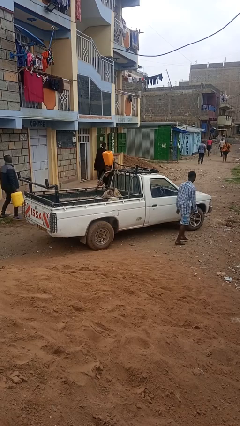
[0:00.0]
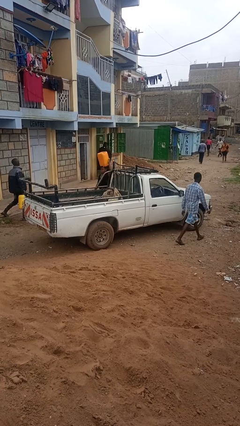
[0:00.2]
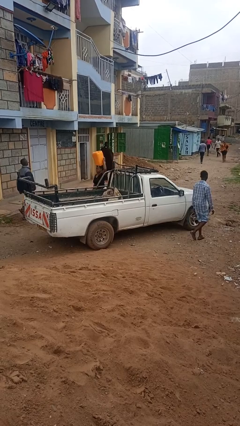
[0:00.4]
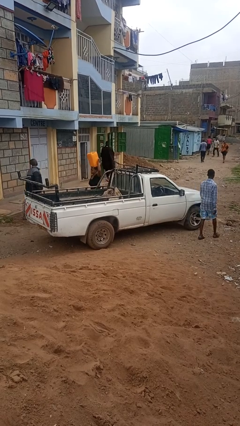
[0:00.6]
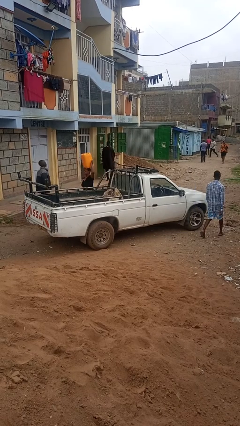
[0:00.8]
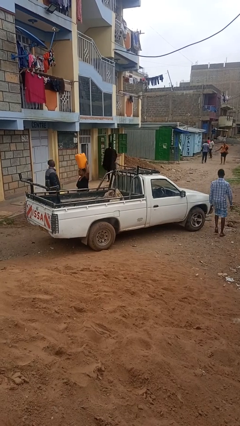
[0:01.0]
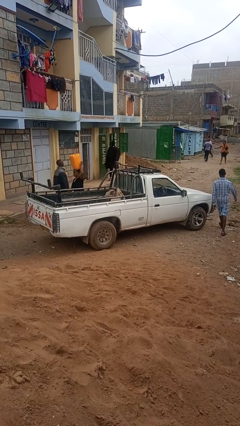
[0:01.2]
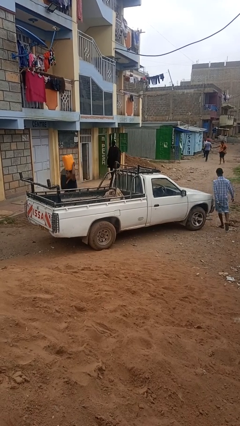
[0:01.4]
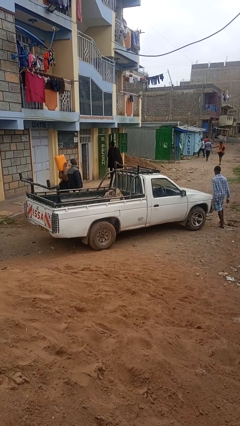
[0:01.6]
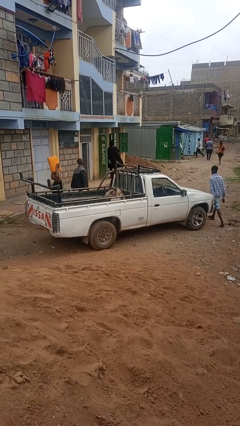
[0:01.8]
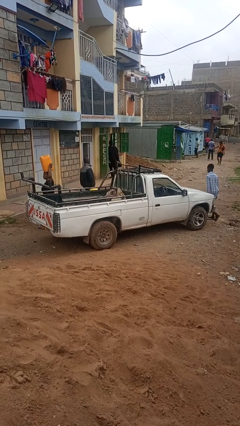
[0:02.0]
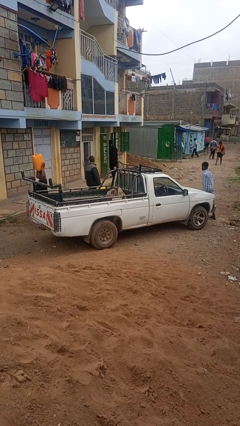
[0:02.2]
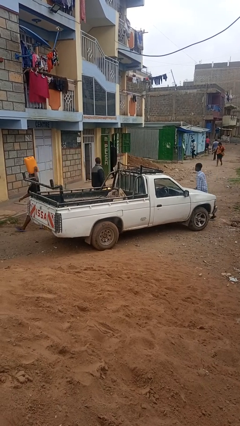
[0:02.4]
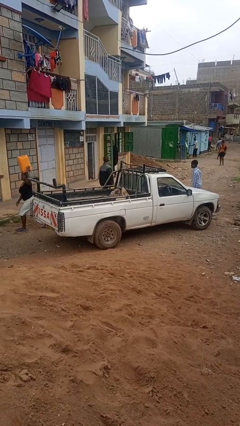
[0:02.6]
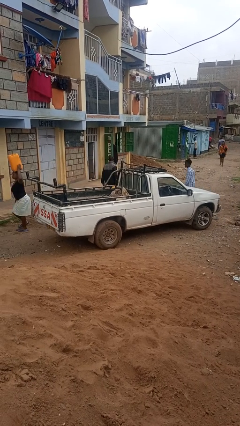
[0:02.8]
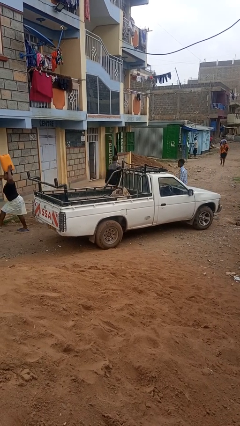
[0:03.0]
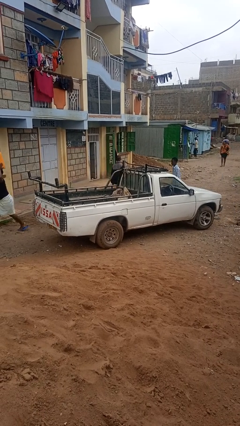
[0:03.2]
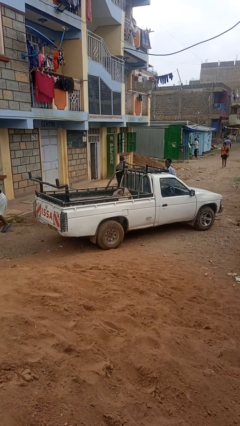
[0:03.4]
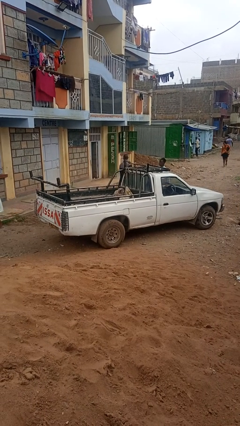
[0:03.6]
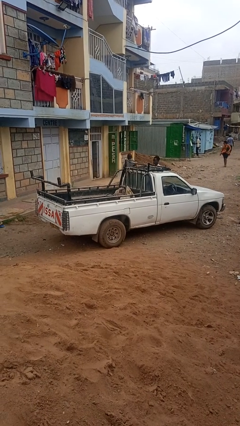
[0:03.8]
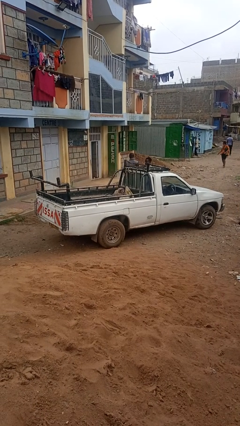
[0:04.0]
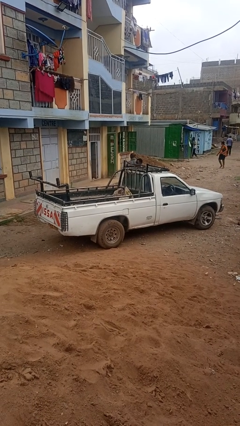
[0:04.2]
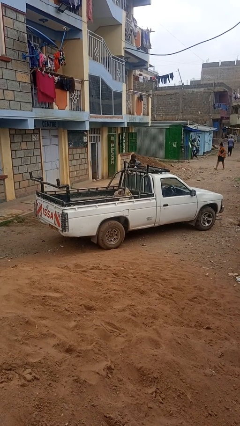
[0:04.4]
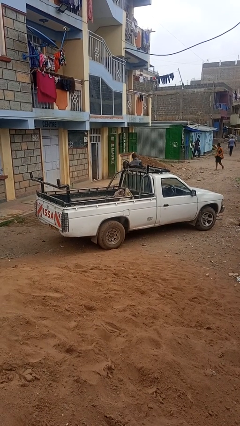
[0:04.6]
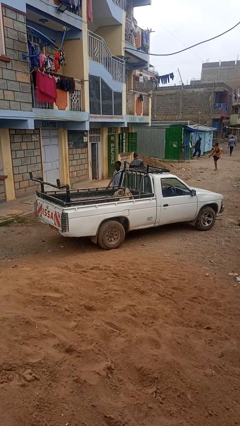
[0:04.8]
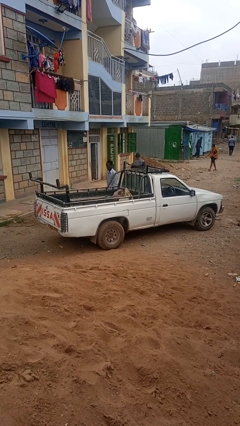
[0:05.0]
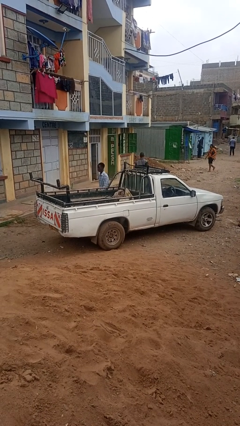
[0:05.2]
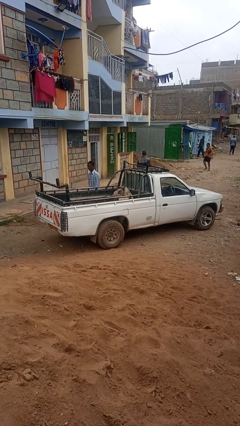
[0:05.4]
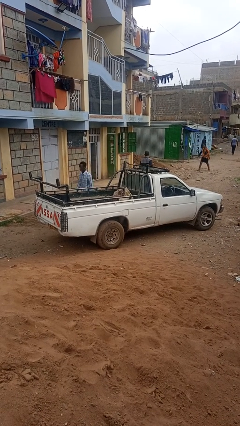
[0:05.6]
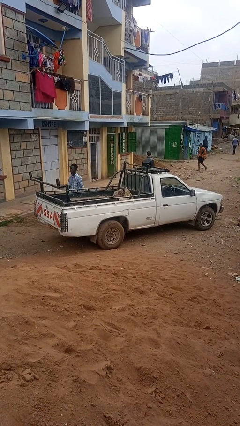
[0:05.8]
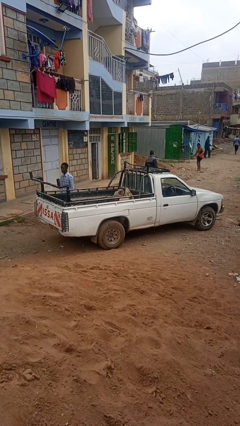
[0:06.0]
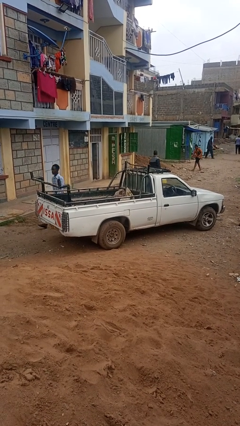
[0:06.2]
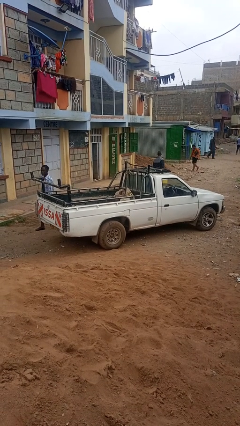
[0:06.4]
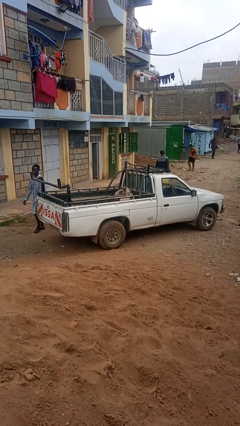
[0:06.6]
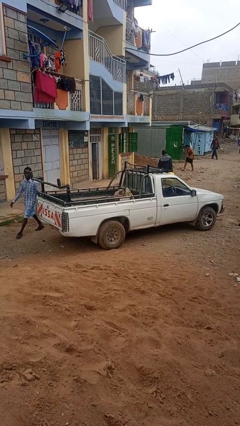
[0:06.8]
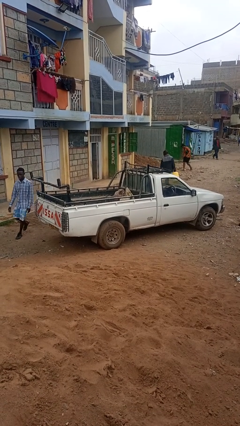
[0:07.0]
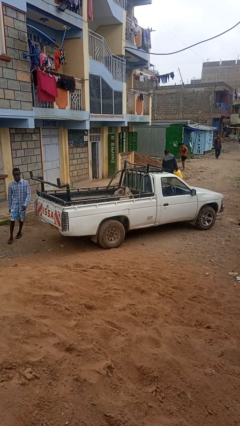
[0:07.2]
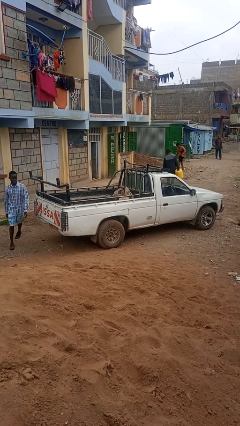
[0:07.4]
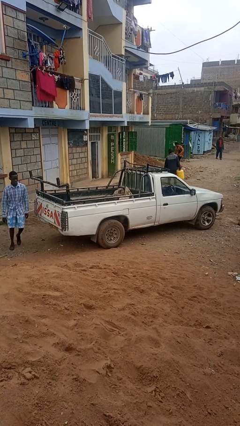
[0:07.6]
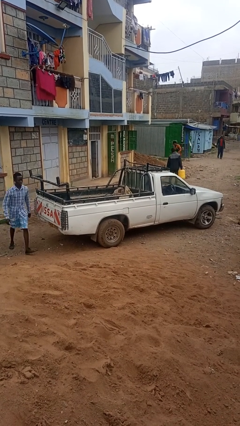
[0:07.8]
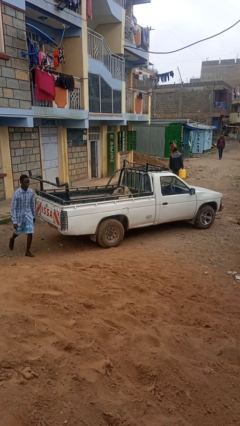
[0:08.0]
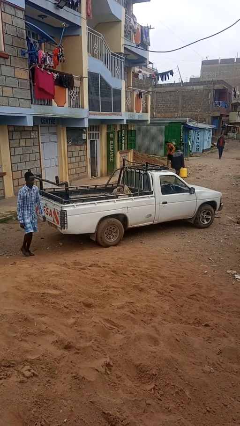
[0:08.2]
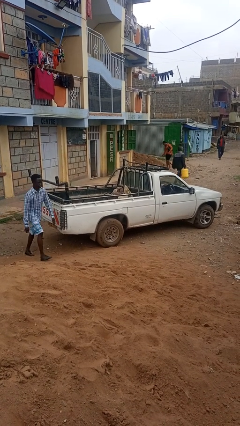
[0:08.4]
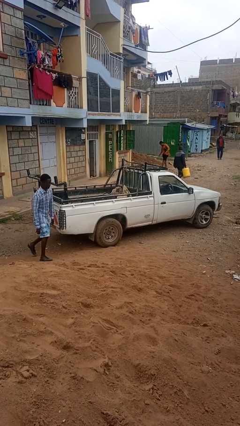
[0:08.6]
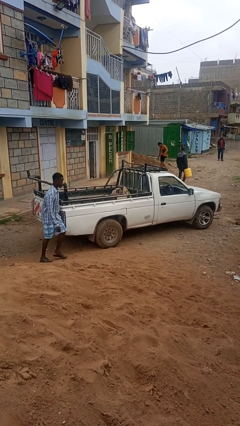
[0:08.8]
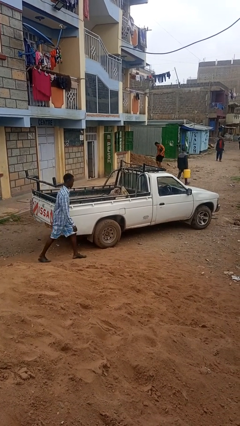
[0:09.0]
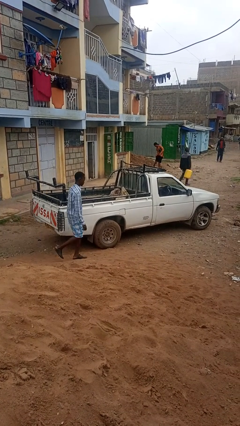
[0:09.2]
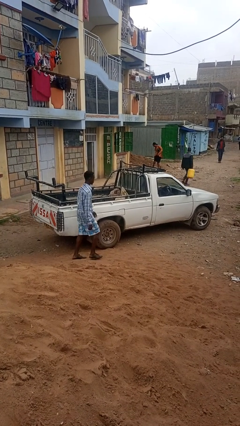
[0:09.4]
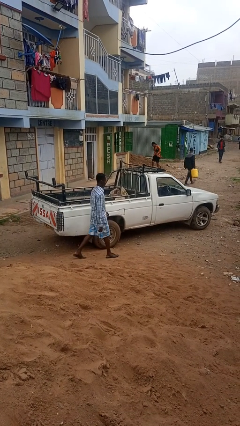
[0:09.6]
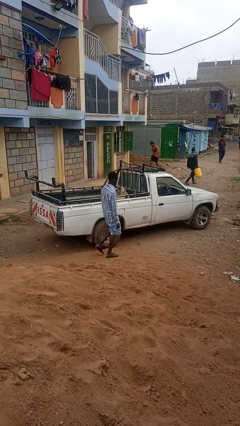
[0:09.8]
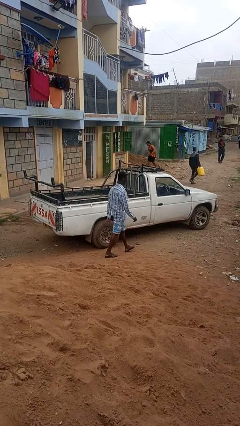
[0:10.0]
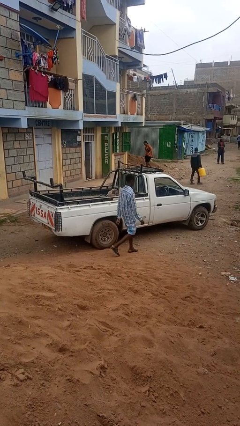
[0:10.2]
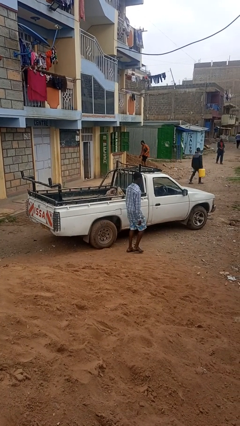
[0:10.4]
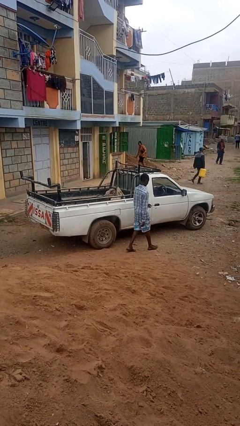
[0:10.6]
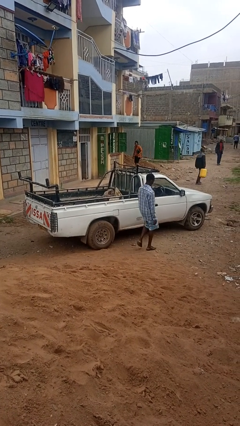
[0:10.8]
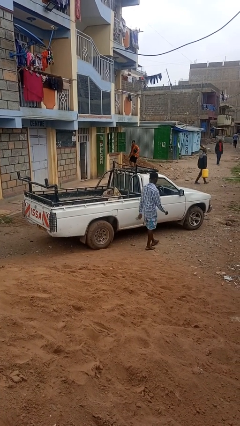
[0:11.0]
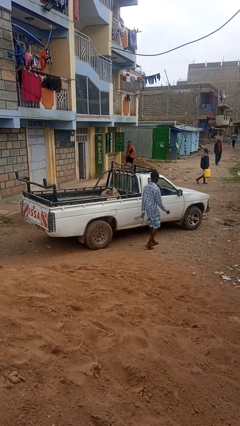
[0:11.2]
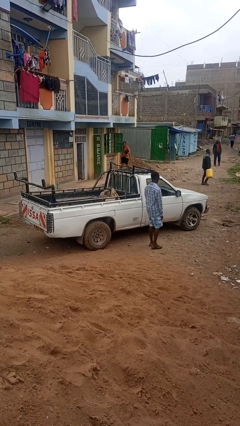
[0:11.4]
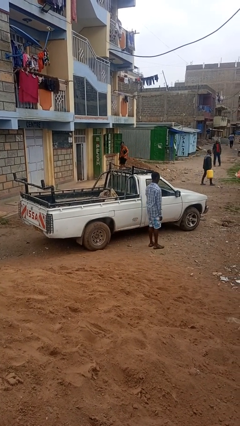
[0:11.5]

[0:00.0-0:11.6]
person walks around car

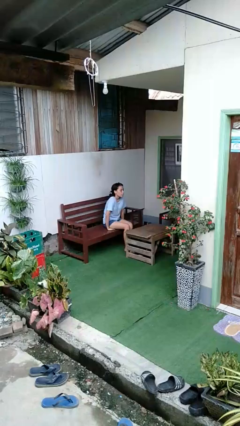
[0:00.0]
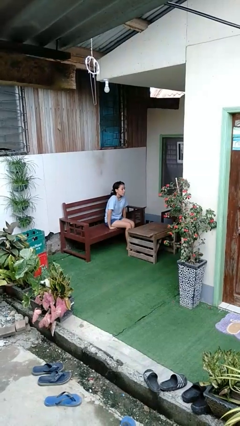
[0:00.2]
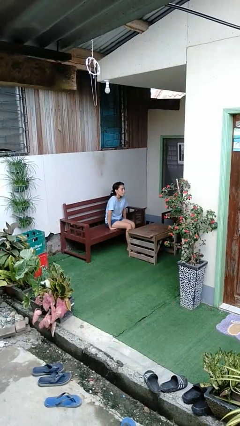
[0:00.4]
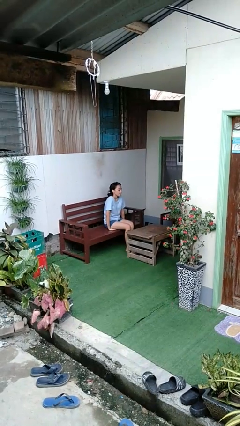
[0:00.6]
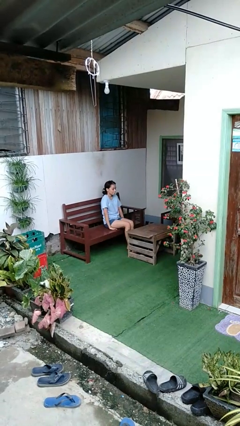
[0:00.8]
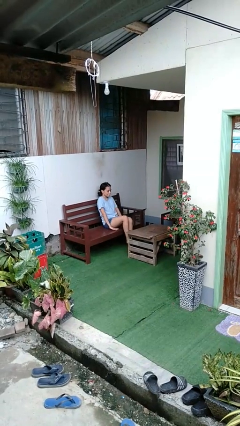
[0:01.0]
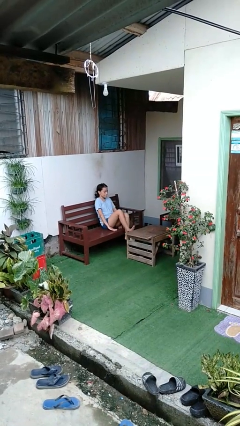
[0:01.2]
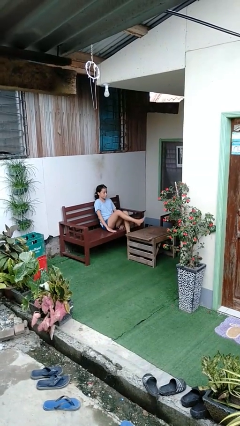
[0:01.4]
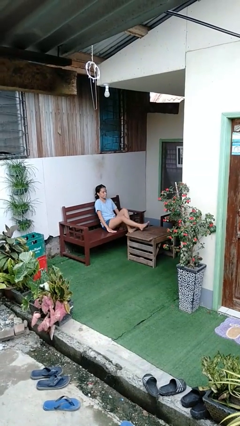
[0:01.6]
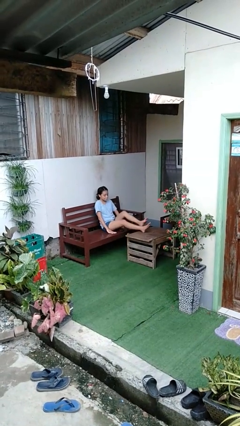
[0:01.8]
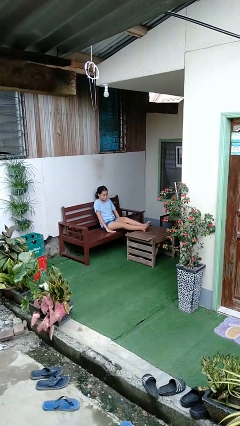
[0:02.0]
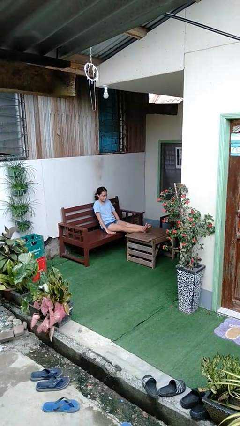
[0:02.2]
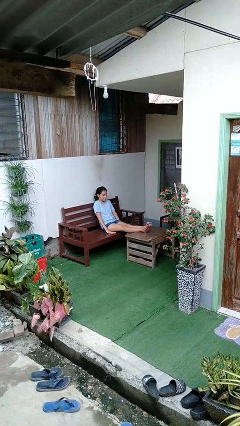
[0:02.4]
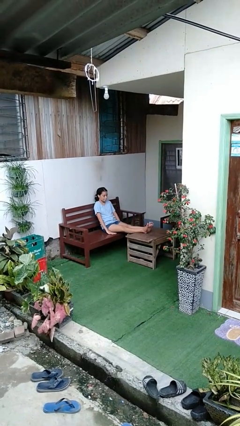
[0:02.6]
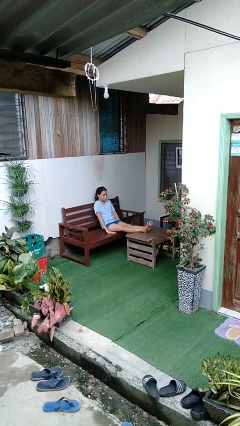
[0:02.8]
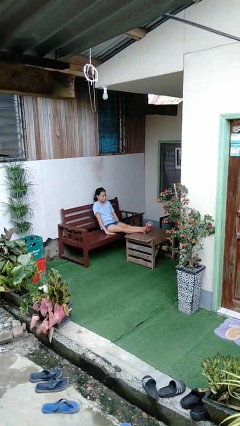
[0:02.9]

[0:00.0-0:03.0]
person puts feet up

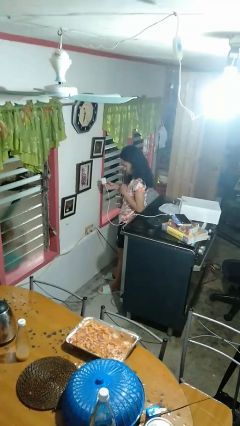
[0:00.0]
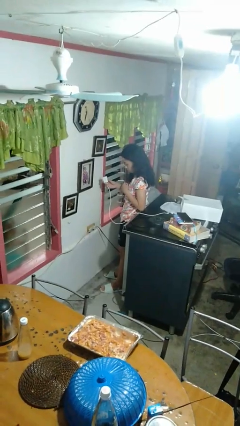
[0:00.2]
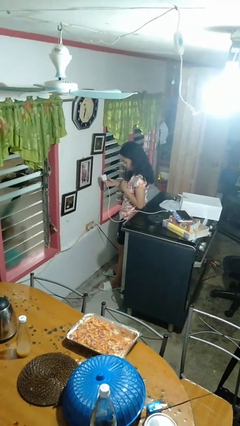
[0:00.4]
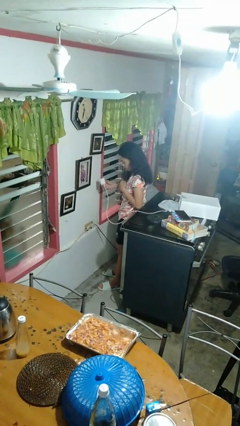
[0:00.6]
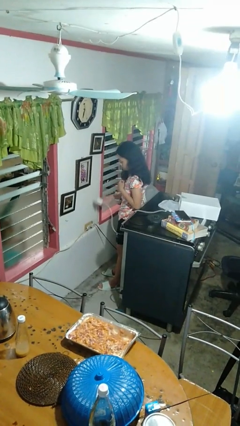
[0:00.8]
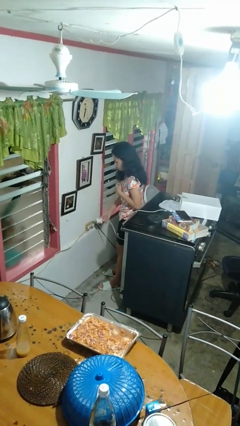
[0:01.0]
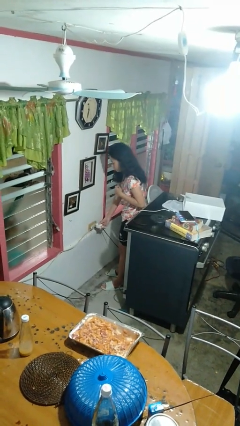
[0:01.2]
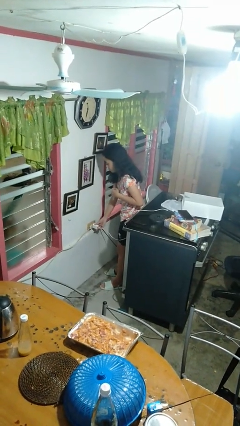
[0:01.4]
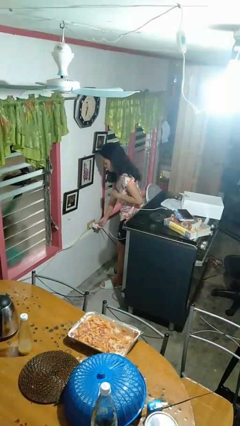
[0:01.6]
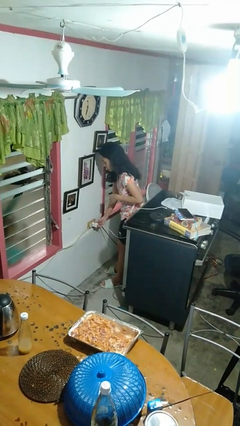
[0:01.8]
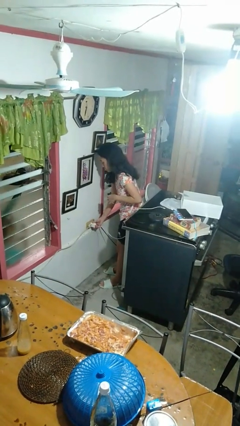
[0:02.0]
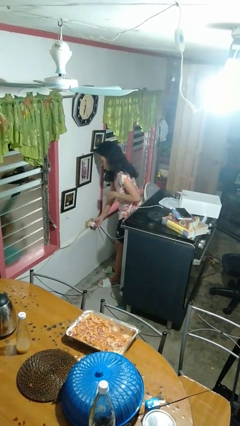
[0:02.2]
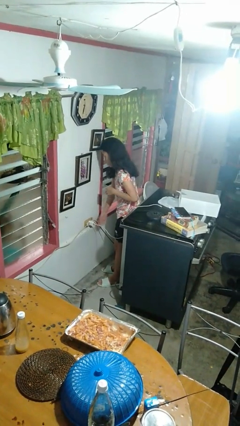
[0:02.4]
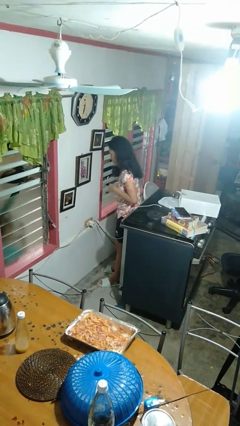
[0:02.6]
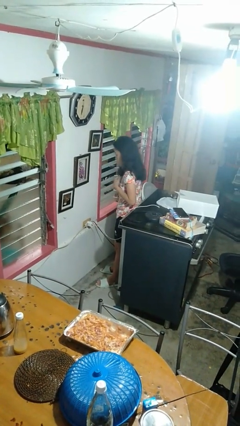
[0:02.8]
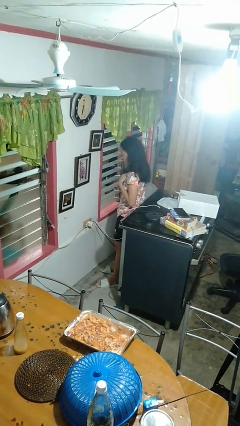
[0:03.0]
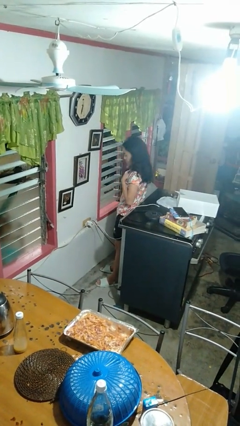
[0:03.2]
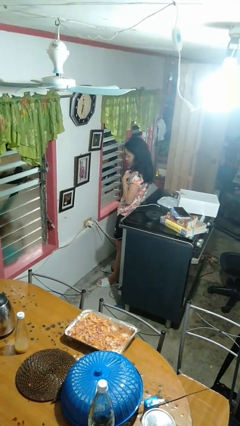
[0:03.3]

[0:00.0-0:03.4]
person plugs into electrical socket
